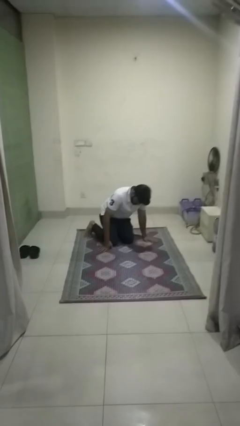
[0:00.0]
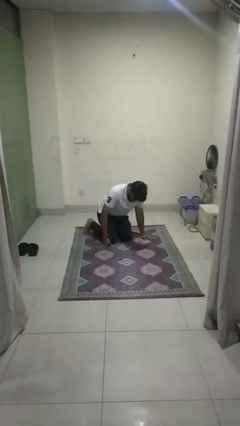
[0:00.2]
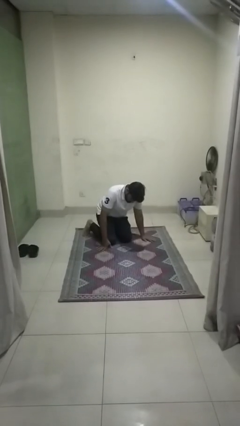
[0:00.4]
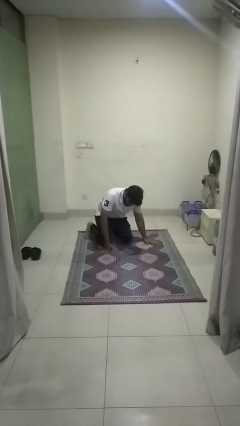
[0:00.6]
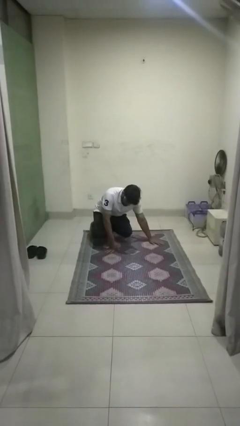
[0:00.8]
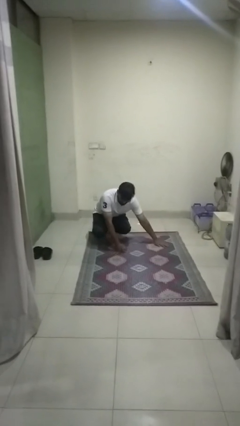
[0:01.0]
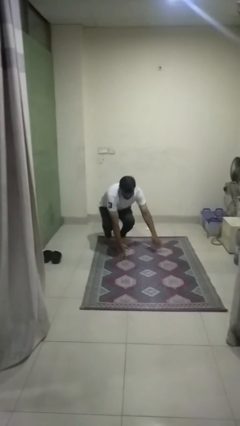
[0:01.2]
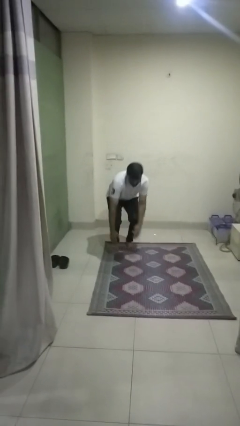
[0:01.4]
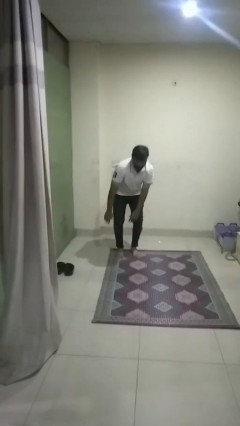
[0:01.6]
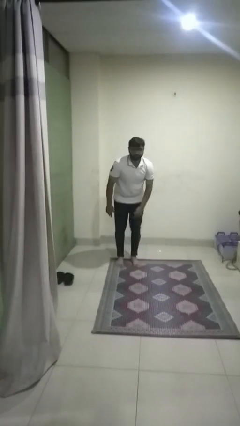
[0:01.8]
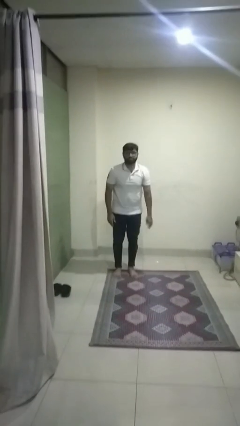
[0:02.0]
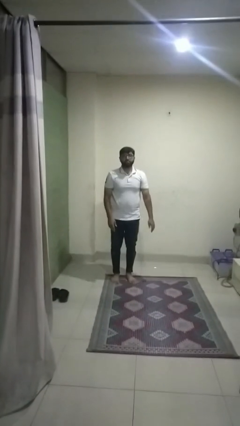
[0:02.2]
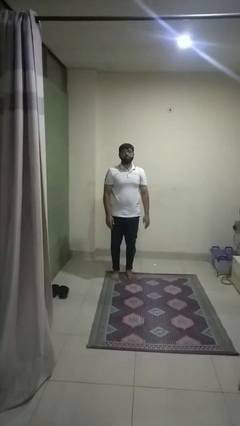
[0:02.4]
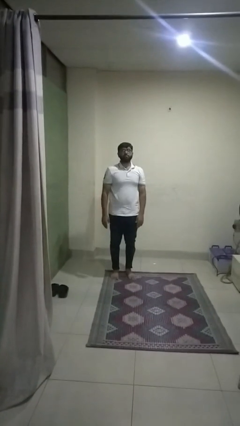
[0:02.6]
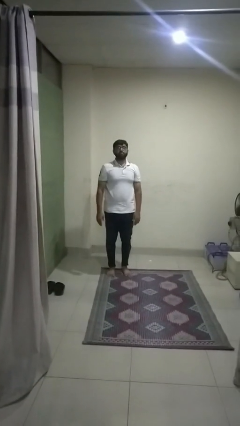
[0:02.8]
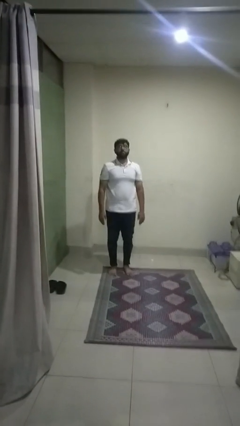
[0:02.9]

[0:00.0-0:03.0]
person stands up from floor

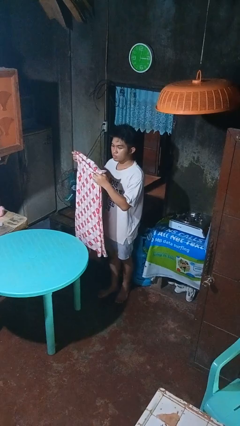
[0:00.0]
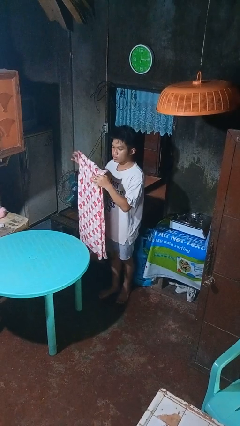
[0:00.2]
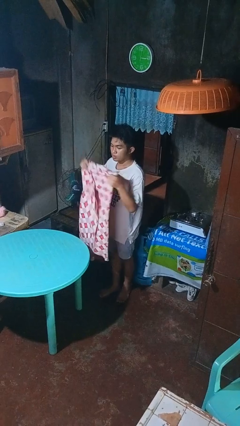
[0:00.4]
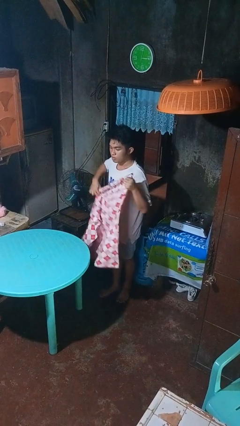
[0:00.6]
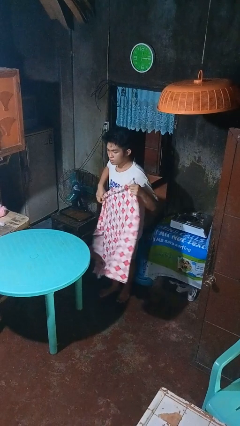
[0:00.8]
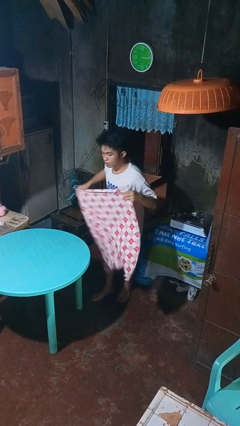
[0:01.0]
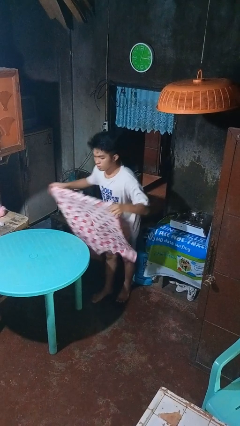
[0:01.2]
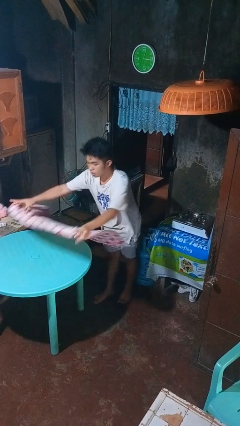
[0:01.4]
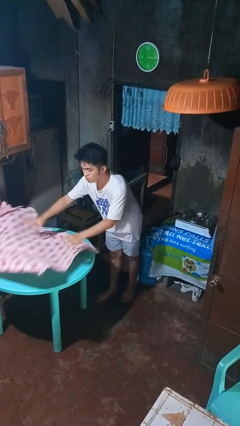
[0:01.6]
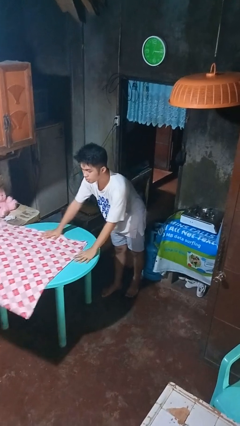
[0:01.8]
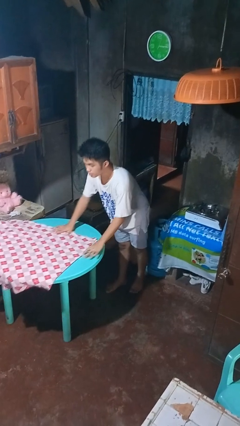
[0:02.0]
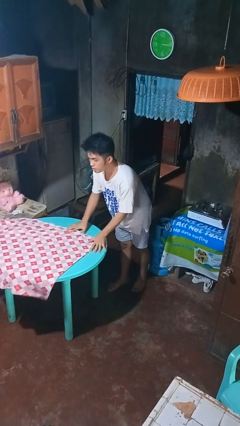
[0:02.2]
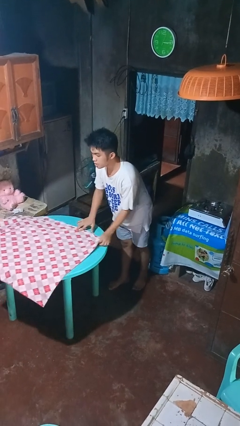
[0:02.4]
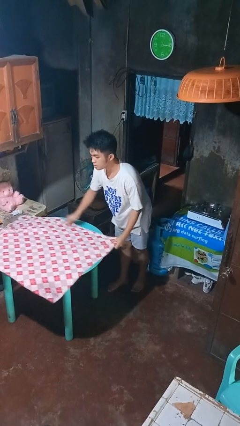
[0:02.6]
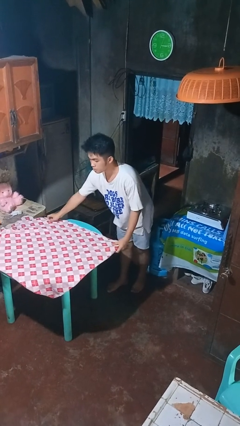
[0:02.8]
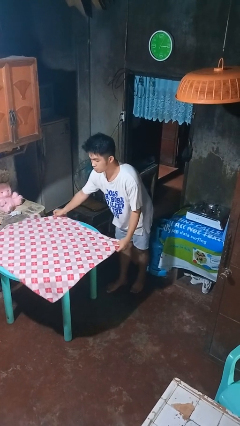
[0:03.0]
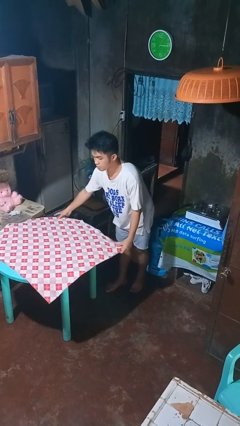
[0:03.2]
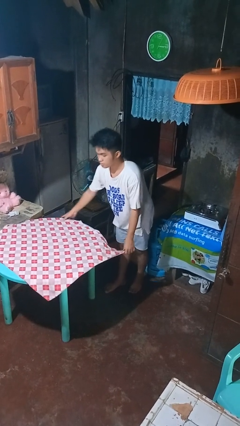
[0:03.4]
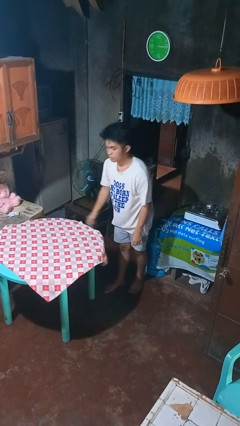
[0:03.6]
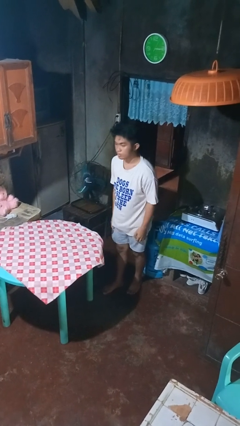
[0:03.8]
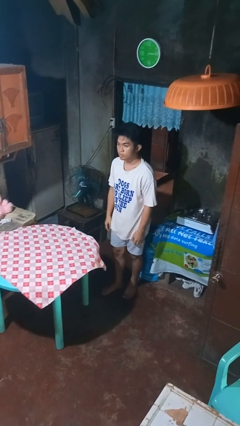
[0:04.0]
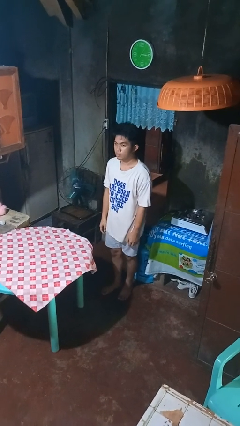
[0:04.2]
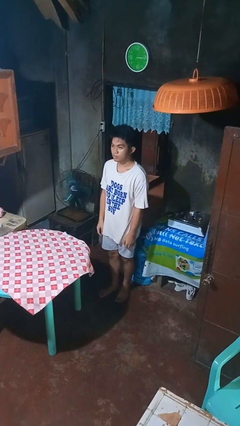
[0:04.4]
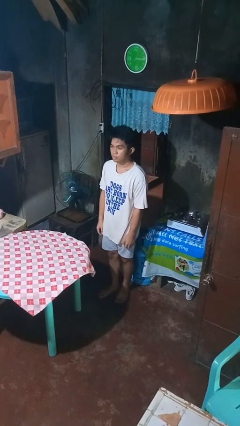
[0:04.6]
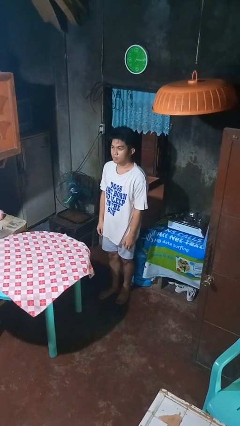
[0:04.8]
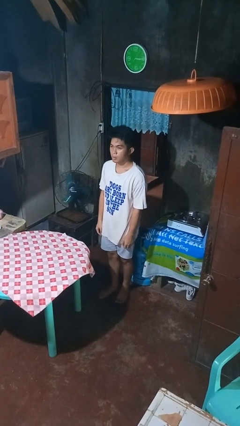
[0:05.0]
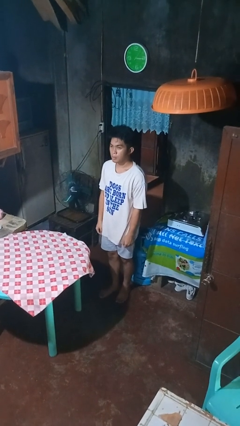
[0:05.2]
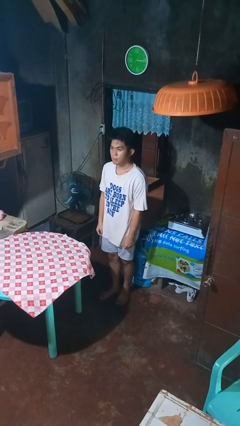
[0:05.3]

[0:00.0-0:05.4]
person spreads tablecloth

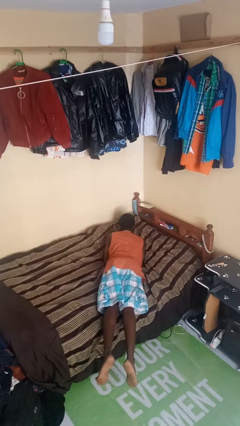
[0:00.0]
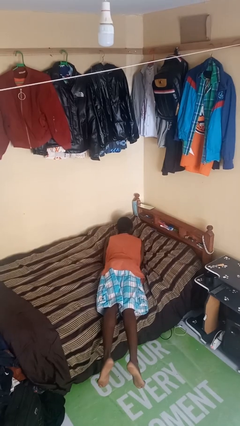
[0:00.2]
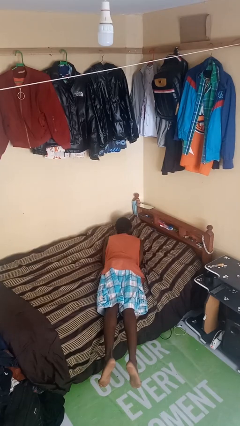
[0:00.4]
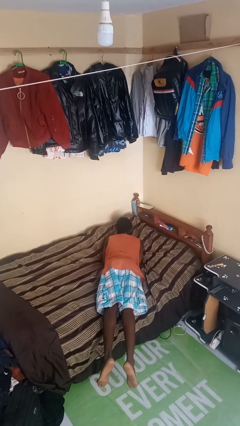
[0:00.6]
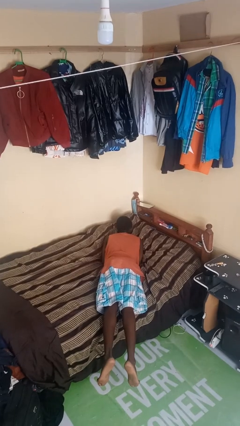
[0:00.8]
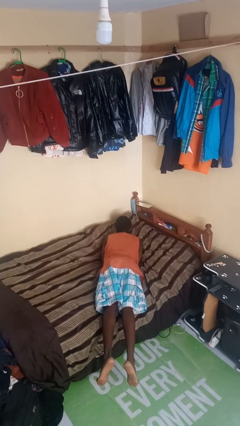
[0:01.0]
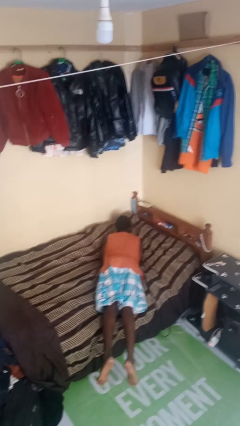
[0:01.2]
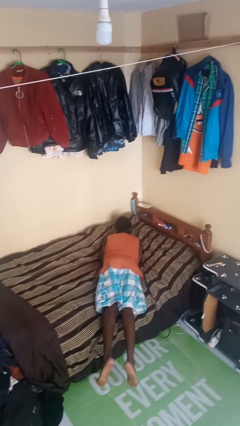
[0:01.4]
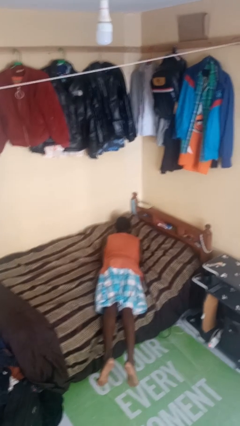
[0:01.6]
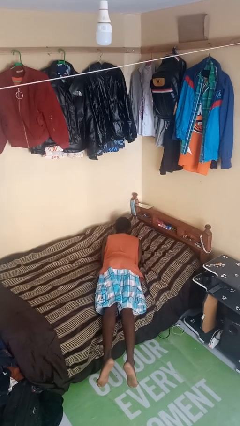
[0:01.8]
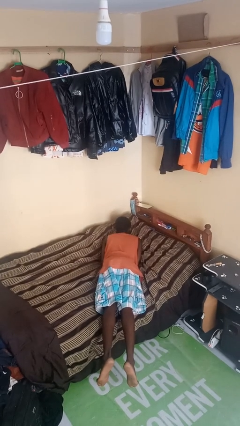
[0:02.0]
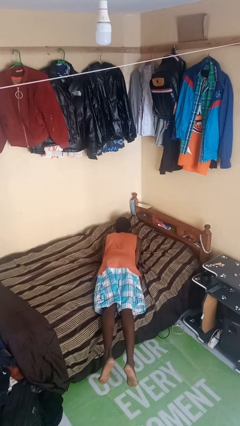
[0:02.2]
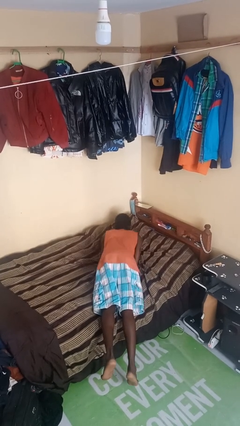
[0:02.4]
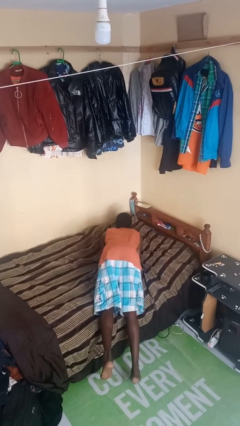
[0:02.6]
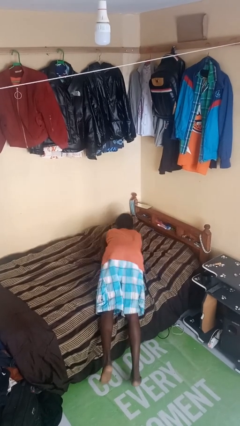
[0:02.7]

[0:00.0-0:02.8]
person lies down on bed

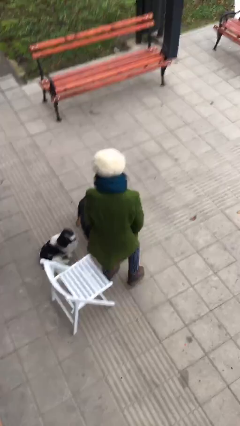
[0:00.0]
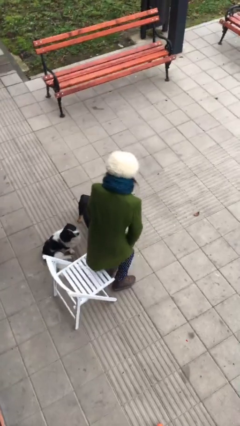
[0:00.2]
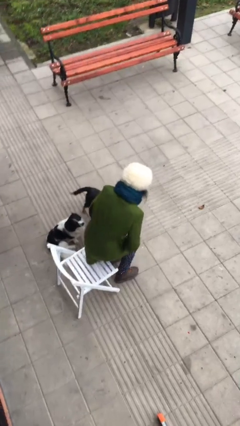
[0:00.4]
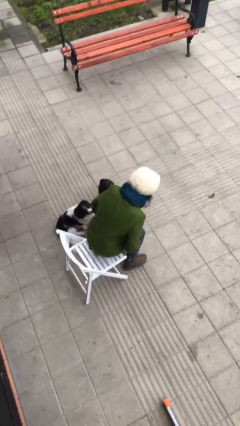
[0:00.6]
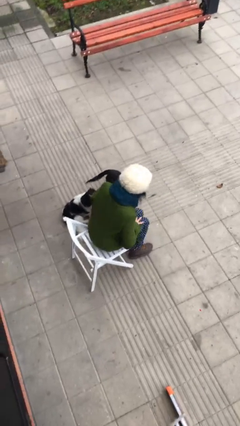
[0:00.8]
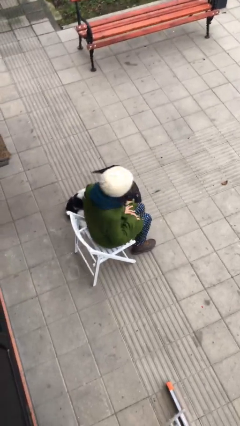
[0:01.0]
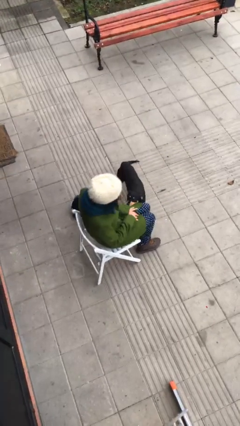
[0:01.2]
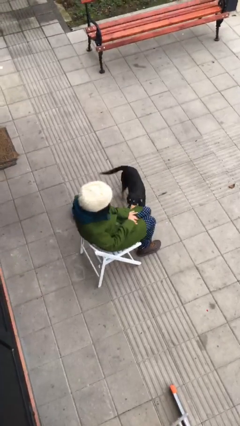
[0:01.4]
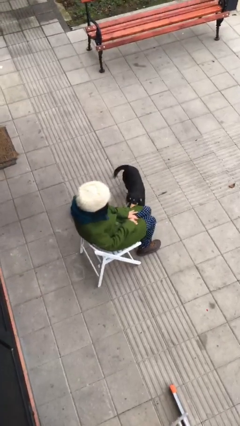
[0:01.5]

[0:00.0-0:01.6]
person sits down

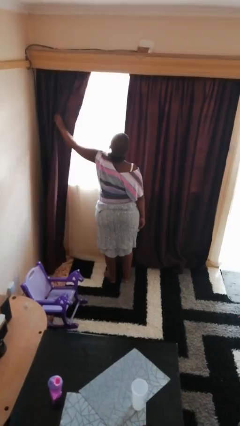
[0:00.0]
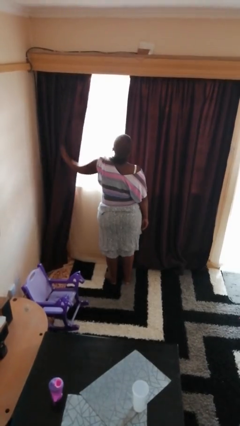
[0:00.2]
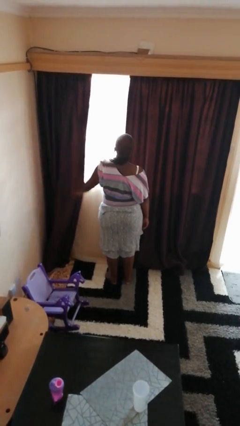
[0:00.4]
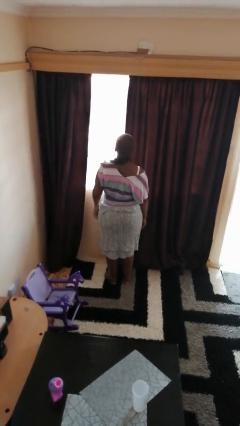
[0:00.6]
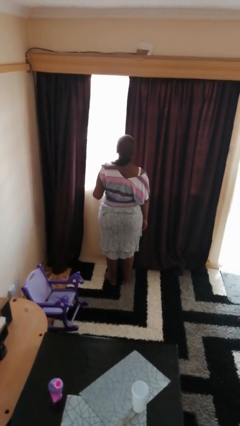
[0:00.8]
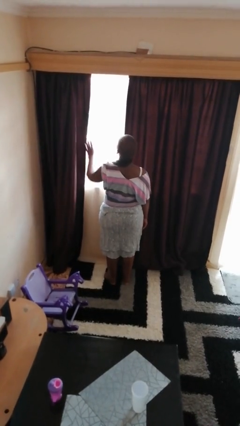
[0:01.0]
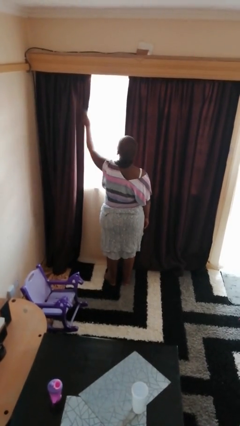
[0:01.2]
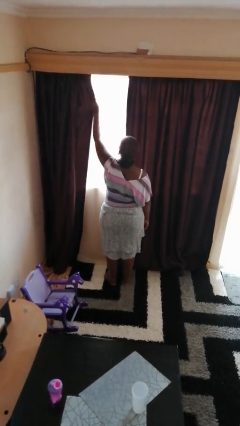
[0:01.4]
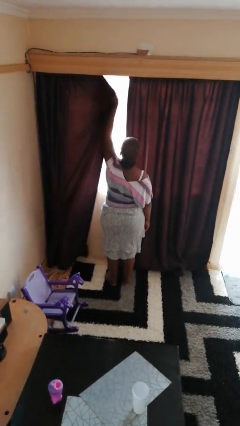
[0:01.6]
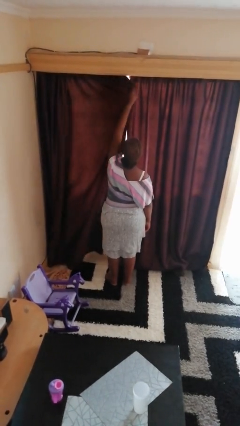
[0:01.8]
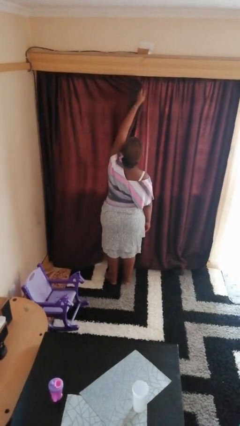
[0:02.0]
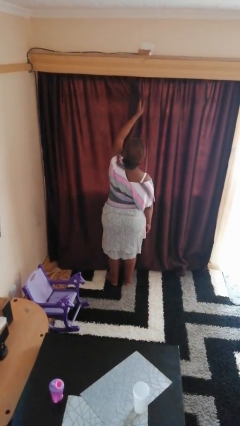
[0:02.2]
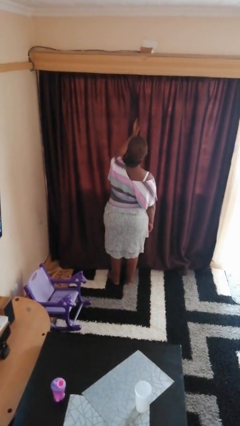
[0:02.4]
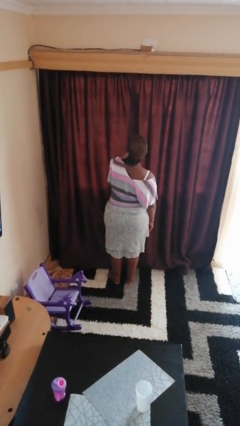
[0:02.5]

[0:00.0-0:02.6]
person closes curtains

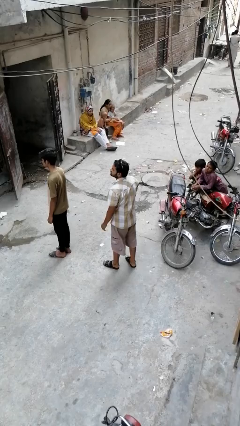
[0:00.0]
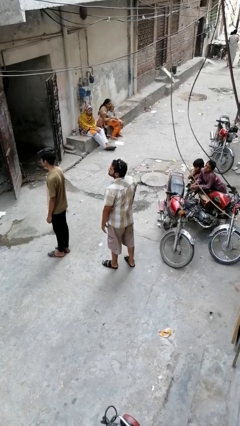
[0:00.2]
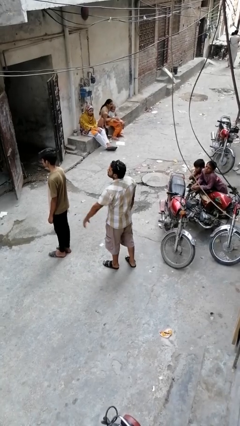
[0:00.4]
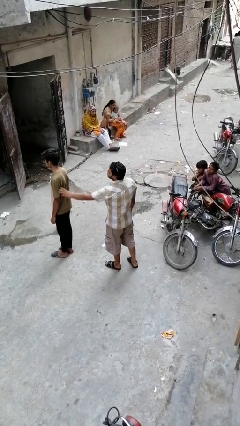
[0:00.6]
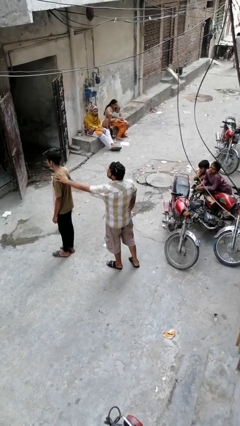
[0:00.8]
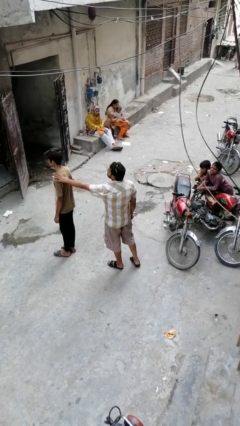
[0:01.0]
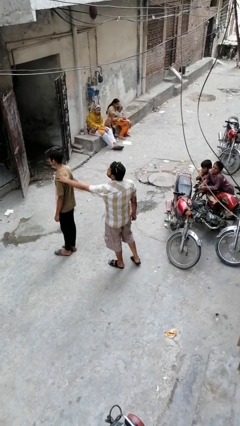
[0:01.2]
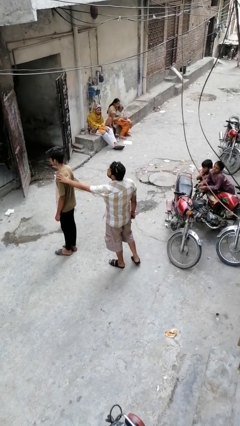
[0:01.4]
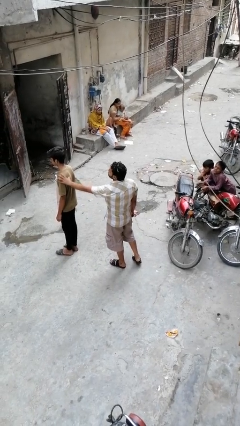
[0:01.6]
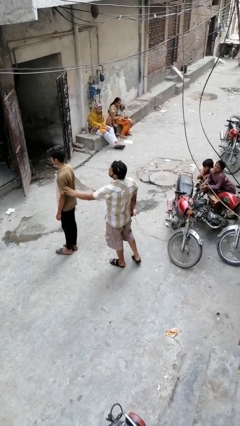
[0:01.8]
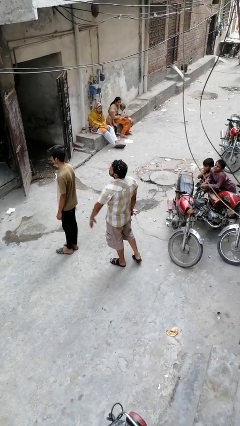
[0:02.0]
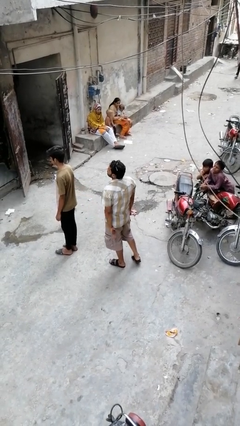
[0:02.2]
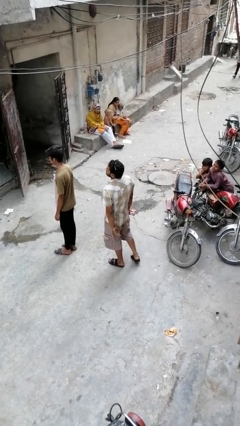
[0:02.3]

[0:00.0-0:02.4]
person touches back of person
